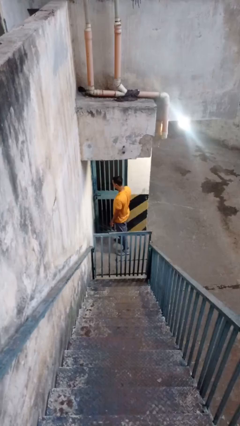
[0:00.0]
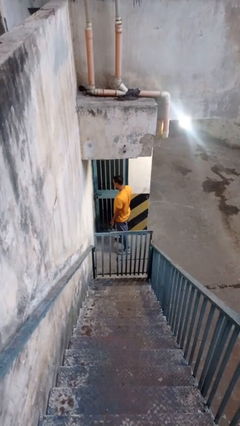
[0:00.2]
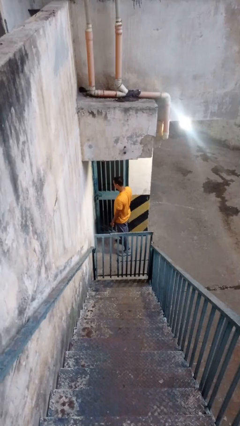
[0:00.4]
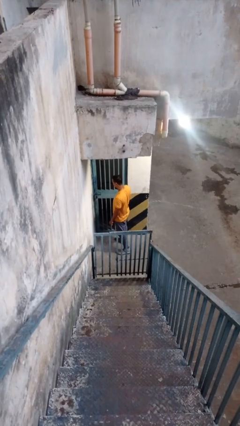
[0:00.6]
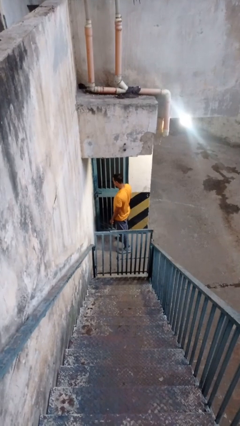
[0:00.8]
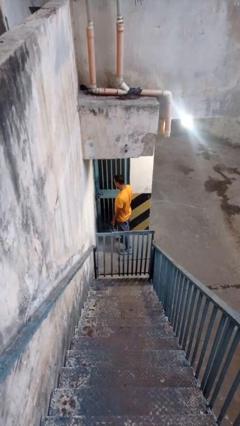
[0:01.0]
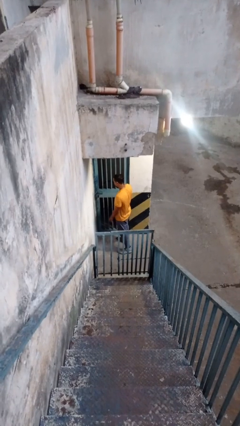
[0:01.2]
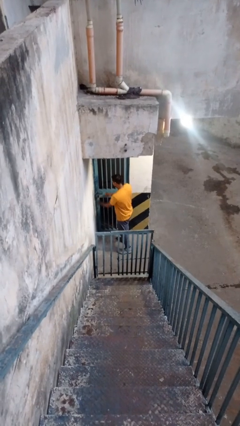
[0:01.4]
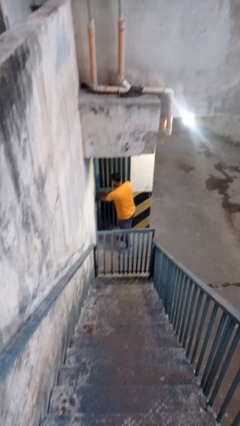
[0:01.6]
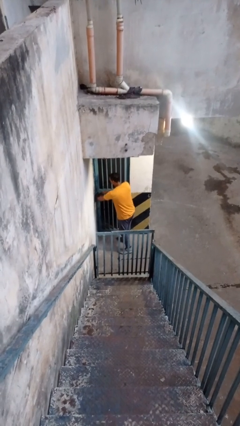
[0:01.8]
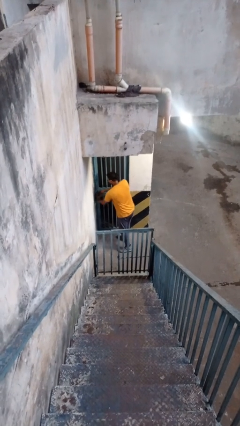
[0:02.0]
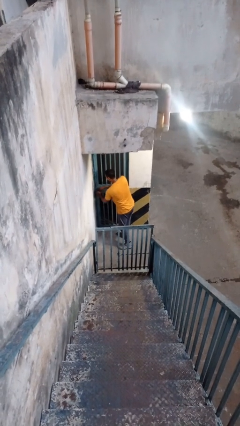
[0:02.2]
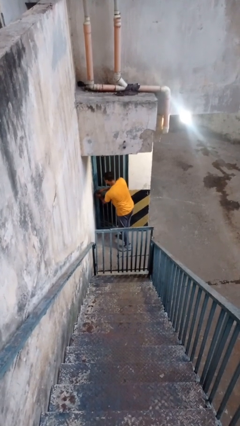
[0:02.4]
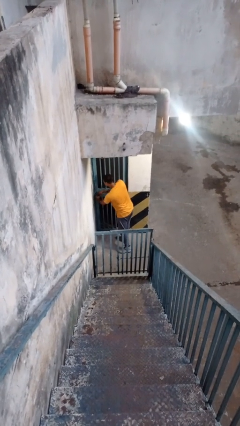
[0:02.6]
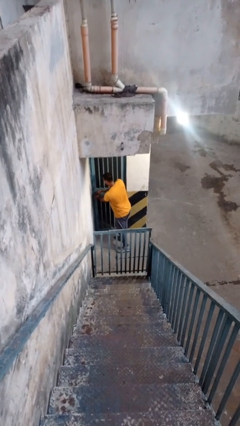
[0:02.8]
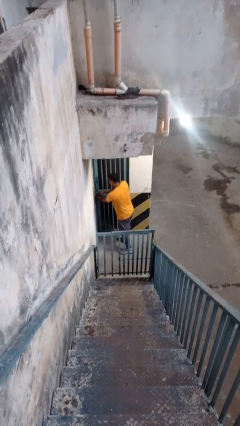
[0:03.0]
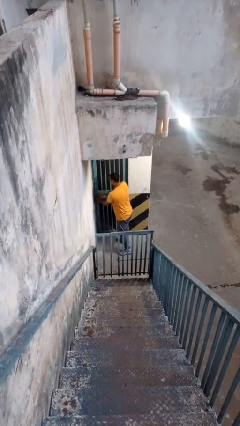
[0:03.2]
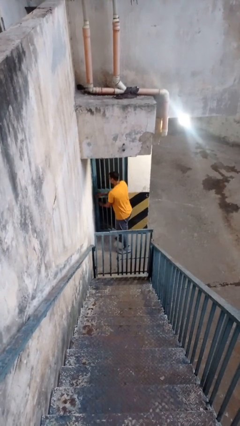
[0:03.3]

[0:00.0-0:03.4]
person unlocks door with keys

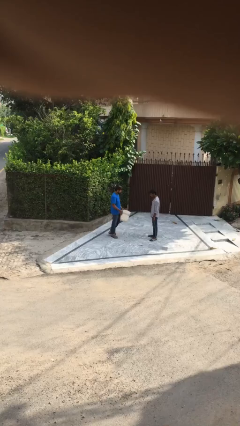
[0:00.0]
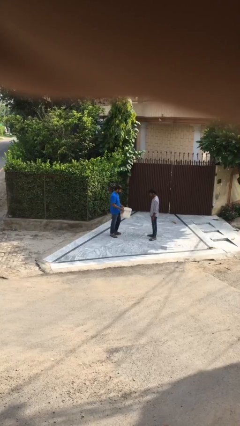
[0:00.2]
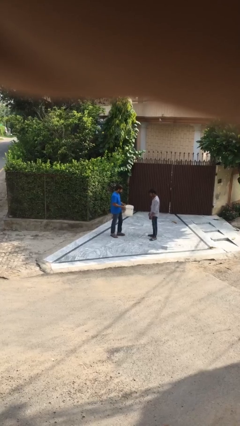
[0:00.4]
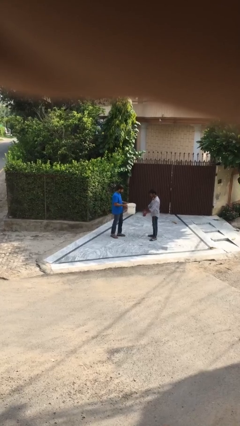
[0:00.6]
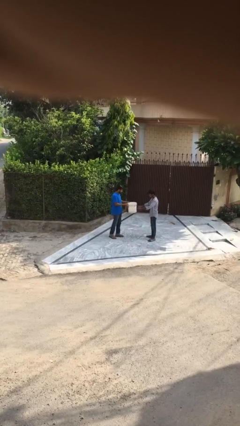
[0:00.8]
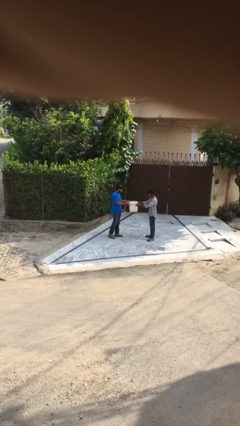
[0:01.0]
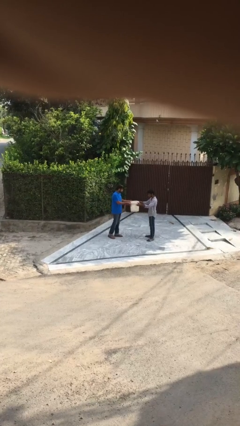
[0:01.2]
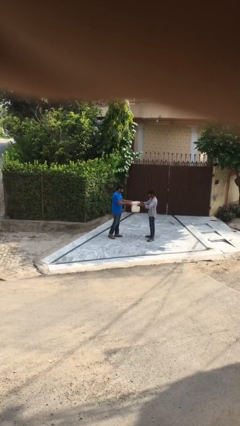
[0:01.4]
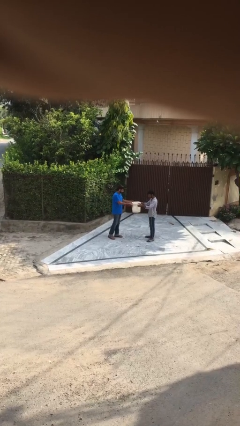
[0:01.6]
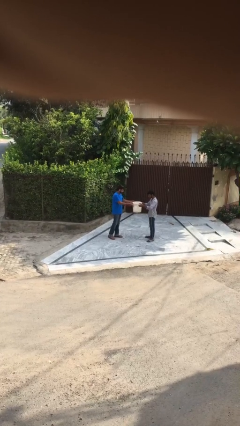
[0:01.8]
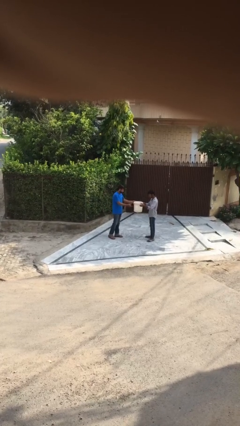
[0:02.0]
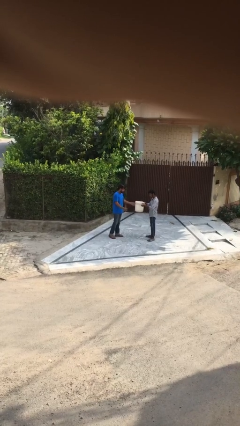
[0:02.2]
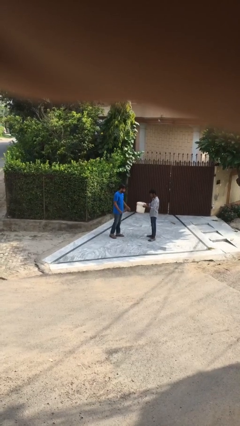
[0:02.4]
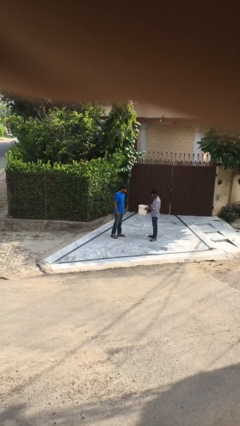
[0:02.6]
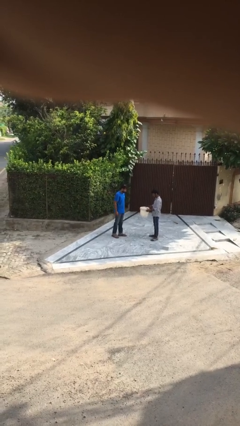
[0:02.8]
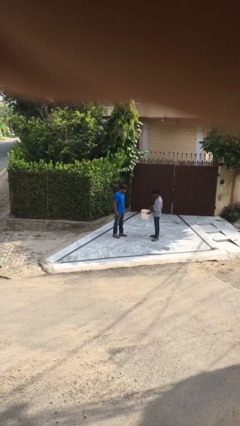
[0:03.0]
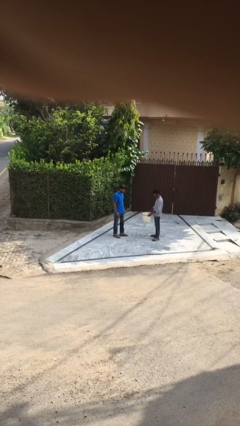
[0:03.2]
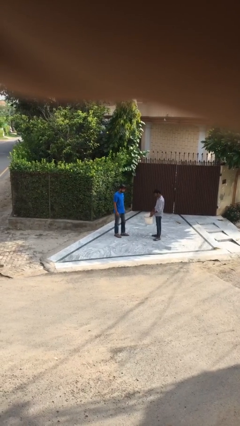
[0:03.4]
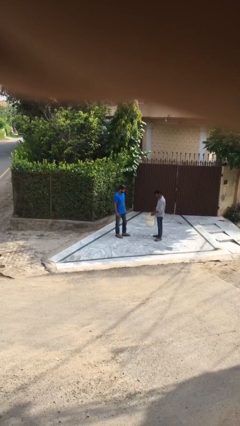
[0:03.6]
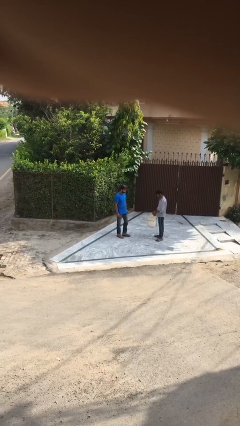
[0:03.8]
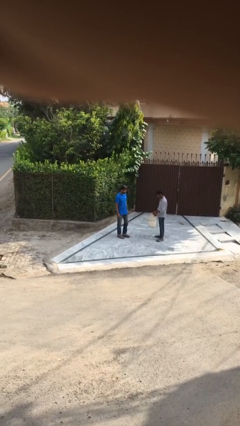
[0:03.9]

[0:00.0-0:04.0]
person transfers object to person

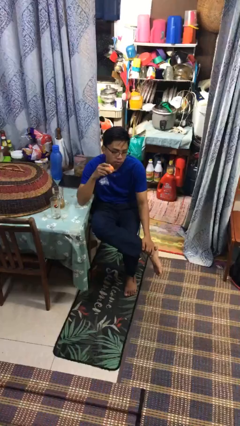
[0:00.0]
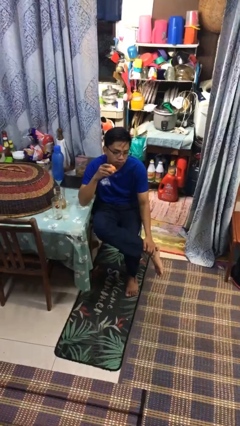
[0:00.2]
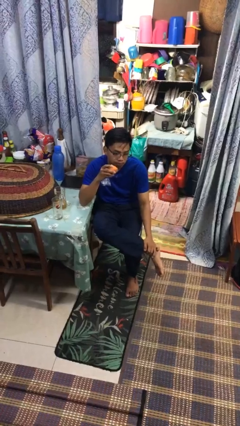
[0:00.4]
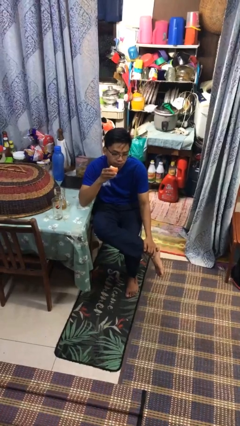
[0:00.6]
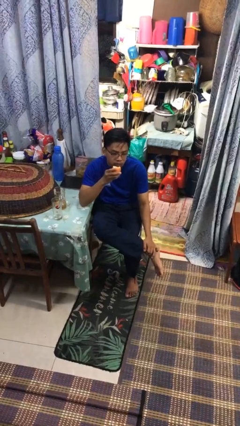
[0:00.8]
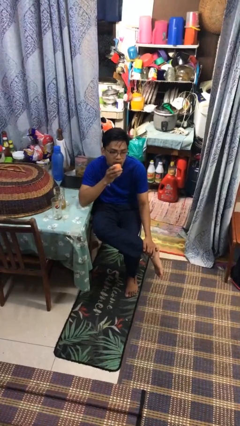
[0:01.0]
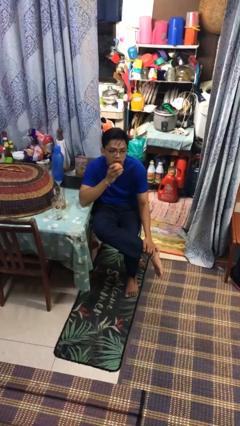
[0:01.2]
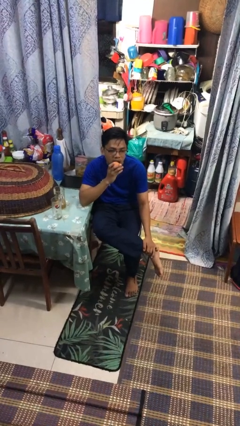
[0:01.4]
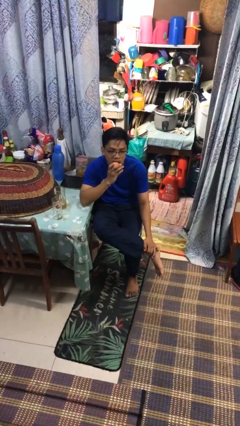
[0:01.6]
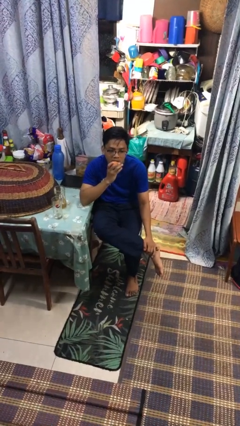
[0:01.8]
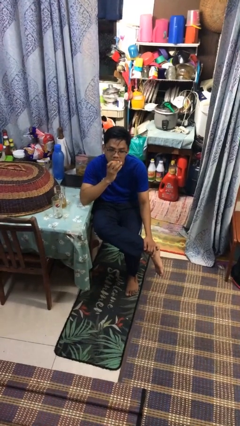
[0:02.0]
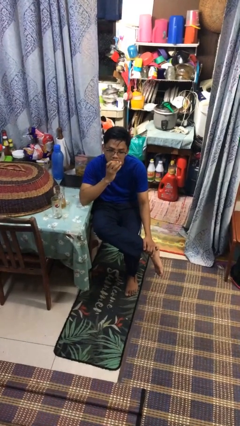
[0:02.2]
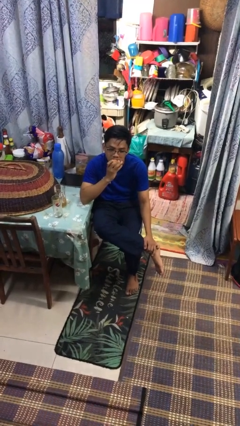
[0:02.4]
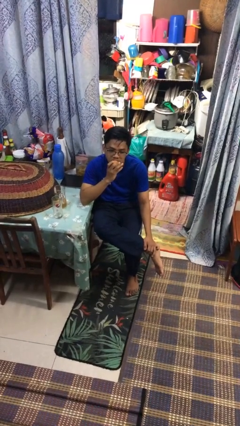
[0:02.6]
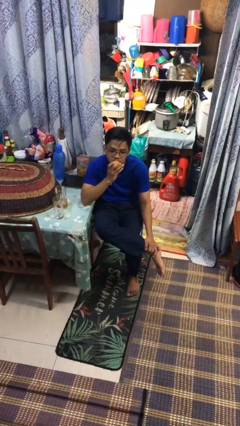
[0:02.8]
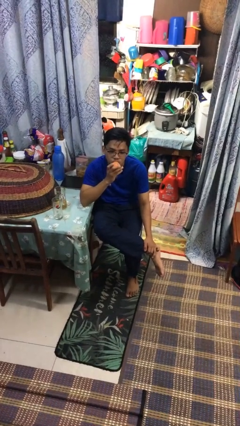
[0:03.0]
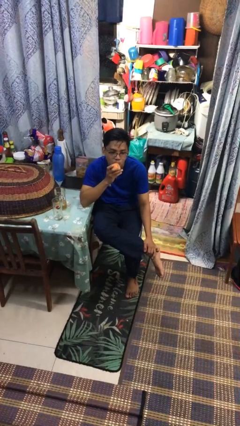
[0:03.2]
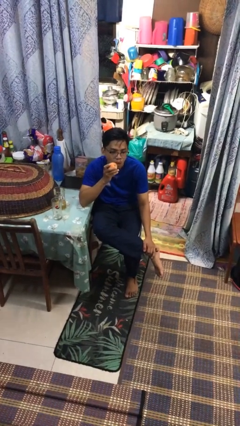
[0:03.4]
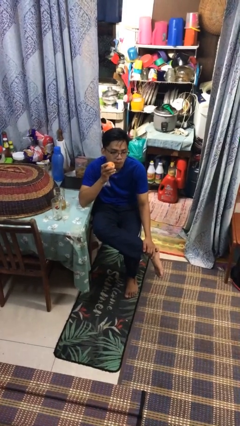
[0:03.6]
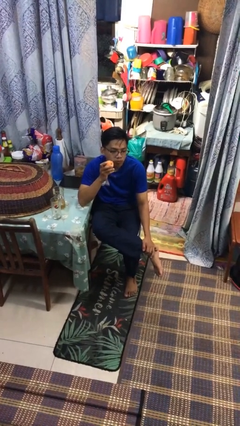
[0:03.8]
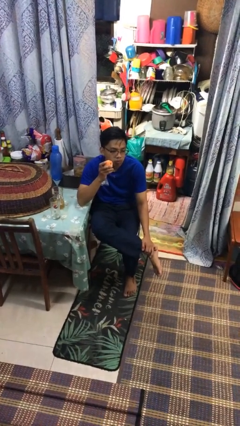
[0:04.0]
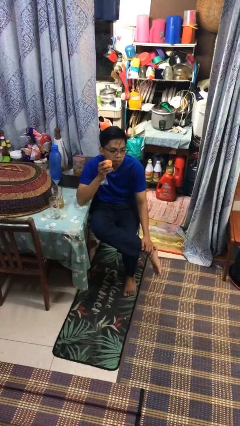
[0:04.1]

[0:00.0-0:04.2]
person eats apple

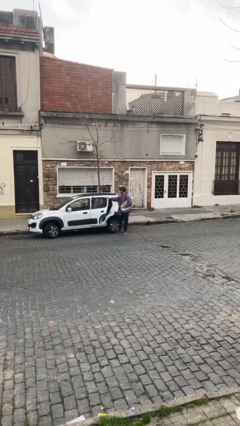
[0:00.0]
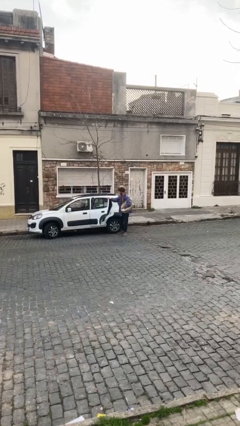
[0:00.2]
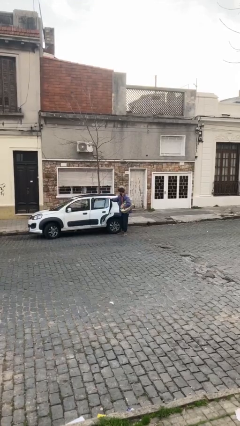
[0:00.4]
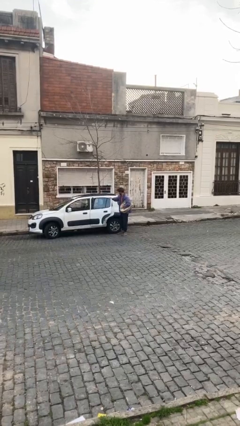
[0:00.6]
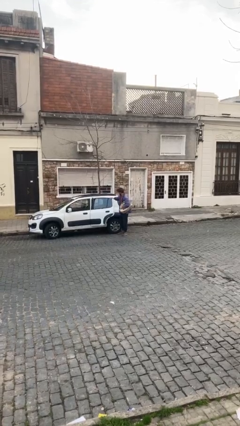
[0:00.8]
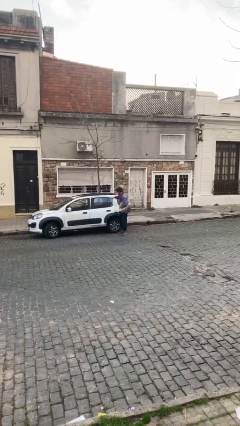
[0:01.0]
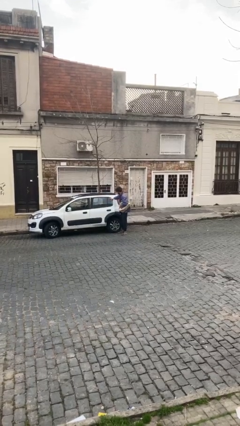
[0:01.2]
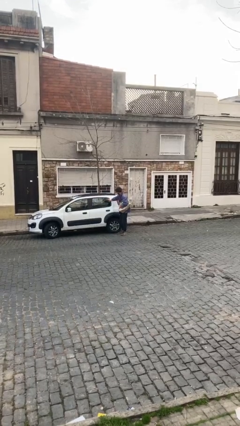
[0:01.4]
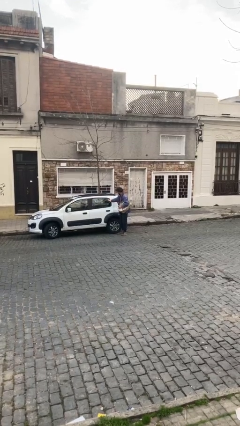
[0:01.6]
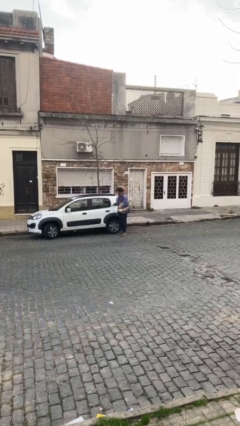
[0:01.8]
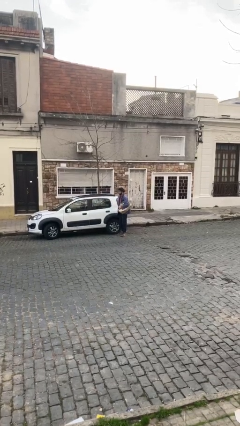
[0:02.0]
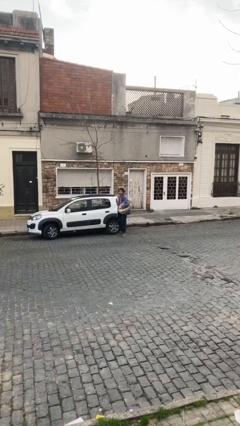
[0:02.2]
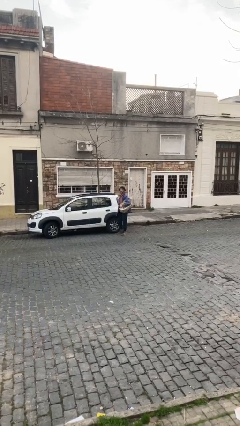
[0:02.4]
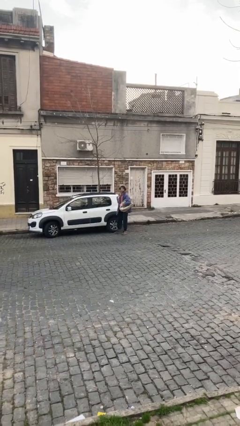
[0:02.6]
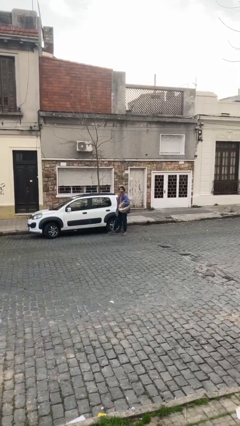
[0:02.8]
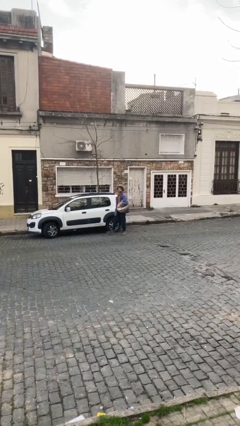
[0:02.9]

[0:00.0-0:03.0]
person closes car door

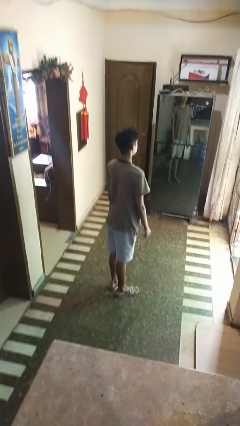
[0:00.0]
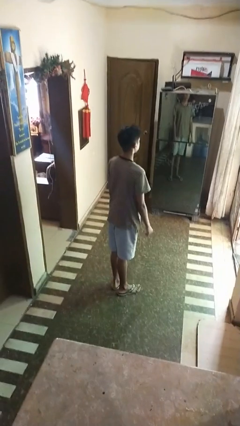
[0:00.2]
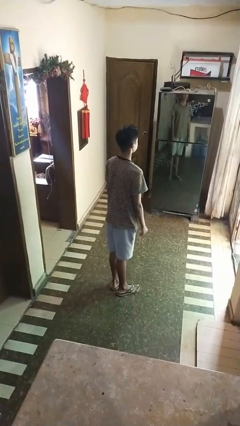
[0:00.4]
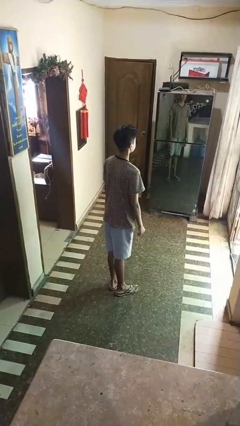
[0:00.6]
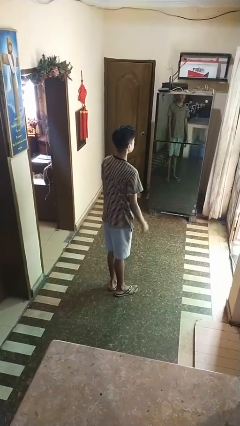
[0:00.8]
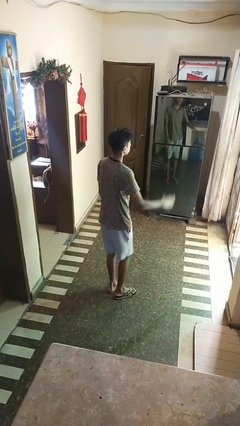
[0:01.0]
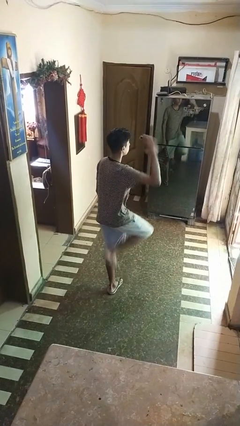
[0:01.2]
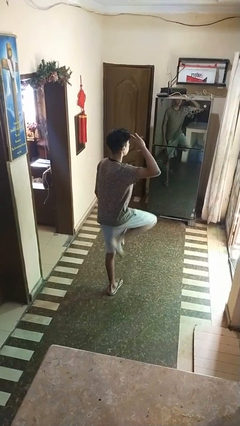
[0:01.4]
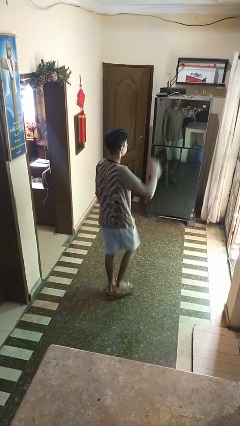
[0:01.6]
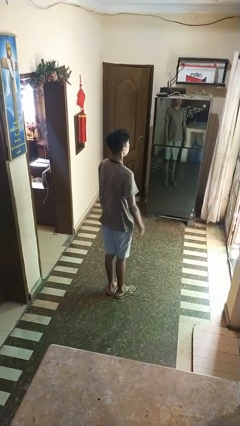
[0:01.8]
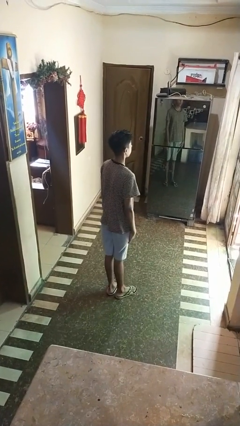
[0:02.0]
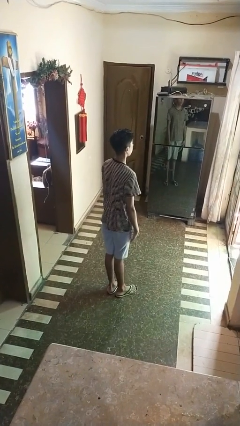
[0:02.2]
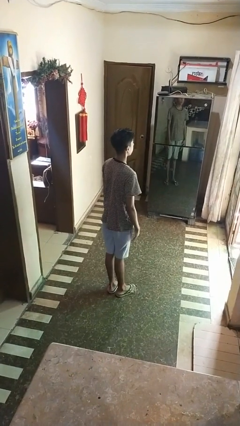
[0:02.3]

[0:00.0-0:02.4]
person salutes

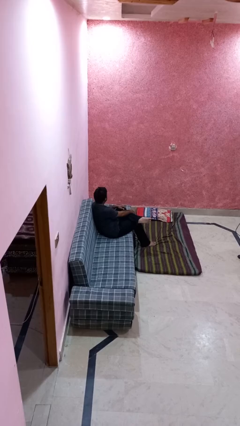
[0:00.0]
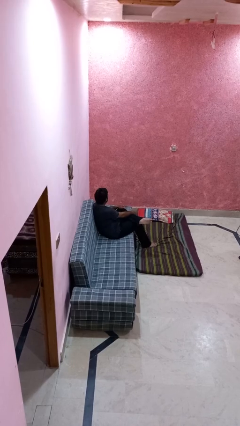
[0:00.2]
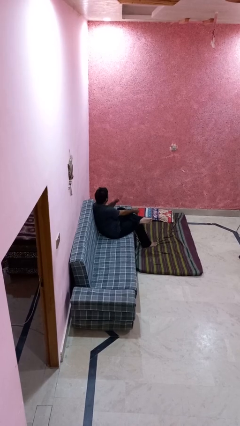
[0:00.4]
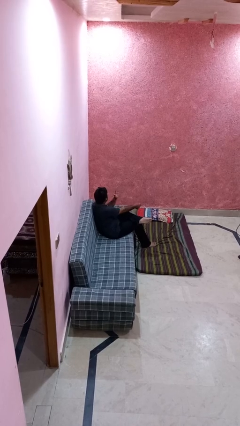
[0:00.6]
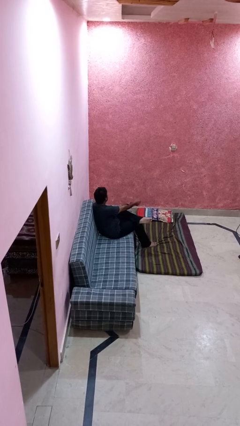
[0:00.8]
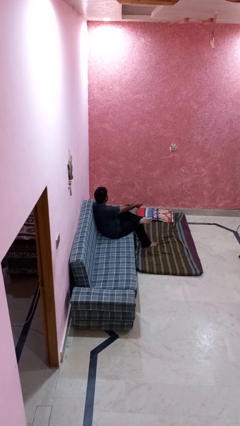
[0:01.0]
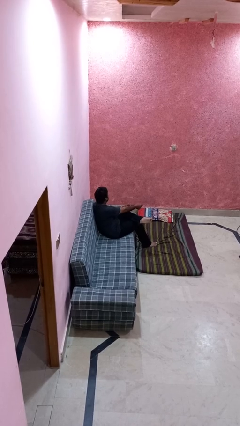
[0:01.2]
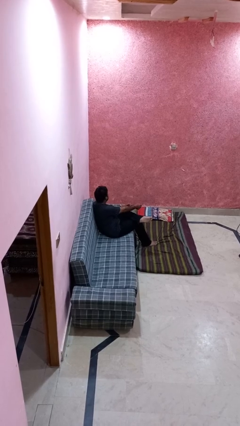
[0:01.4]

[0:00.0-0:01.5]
person swats bug
